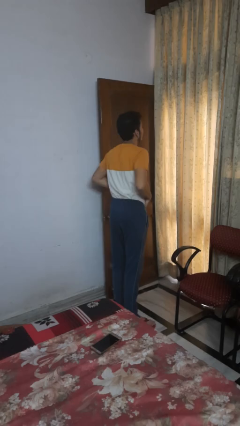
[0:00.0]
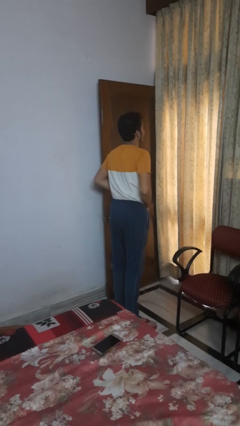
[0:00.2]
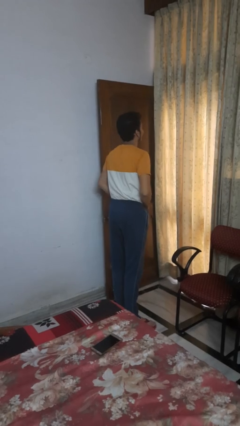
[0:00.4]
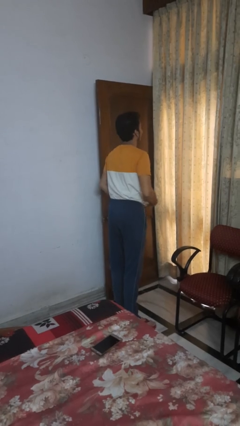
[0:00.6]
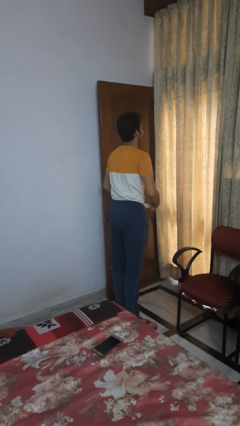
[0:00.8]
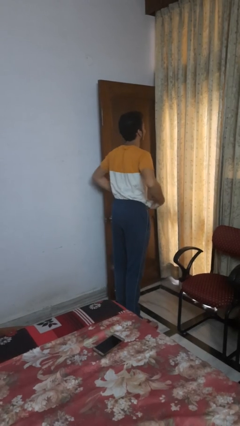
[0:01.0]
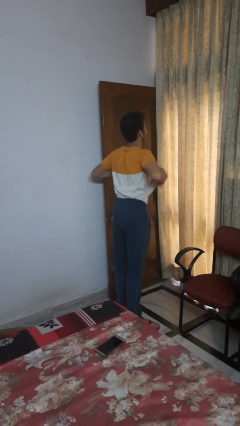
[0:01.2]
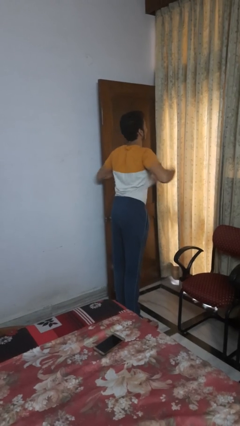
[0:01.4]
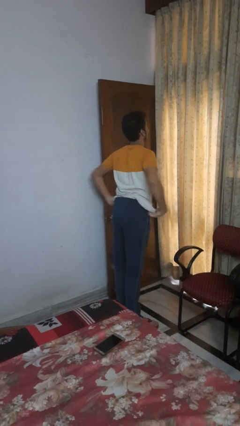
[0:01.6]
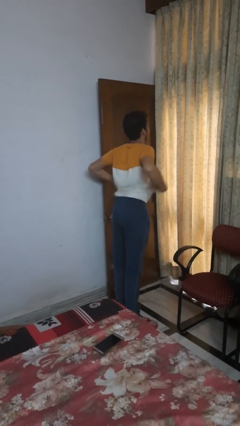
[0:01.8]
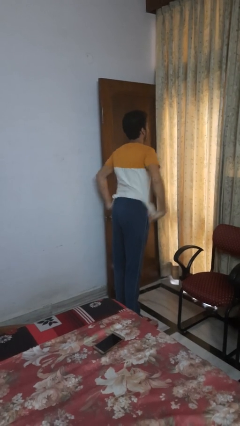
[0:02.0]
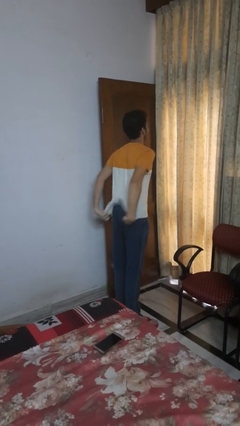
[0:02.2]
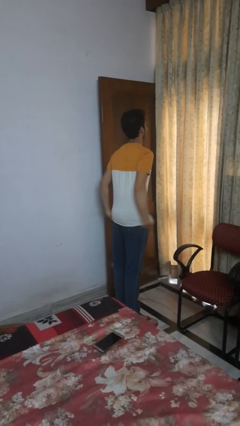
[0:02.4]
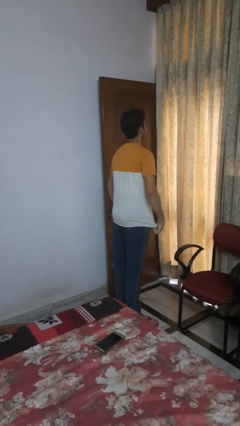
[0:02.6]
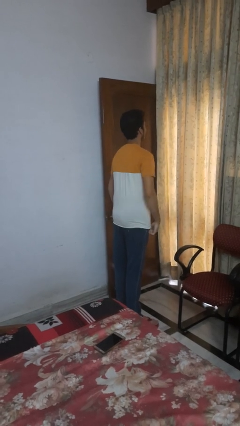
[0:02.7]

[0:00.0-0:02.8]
person untucks shirt

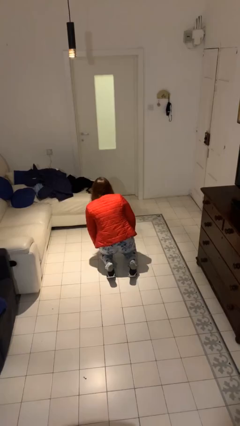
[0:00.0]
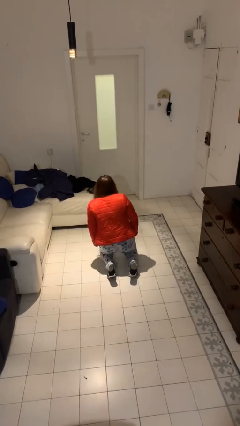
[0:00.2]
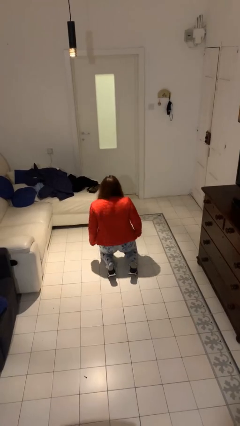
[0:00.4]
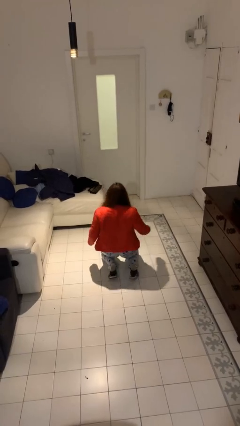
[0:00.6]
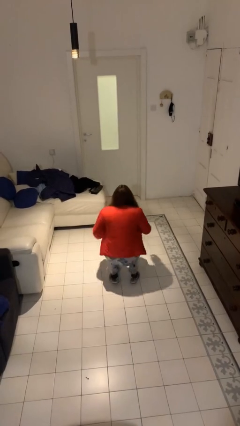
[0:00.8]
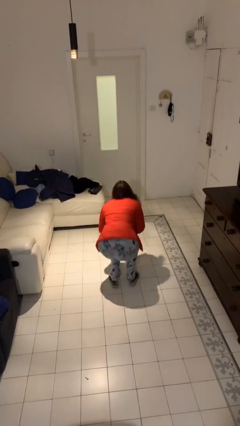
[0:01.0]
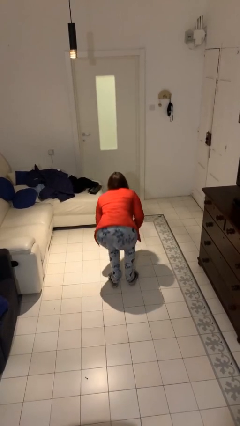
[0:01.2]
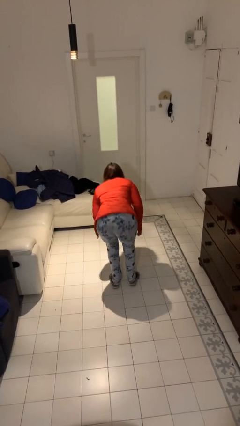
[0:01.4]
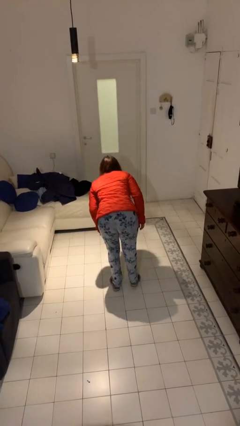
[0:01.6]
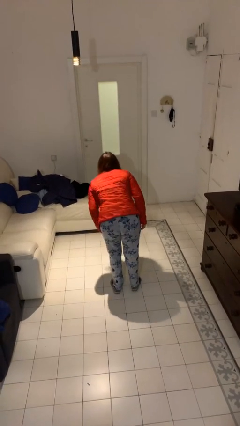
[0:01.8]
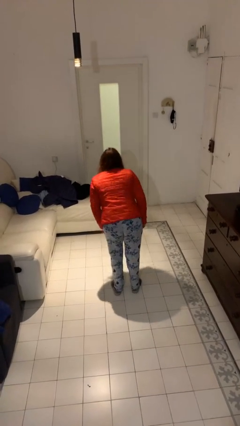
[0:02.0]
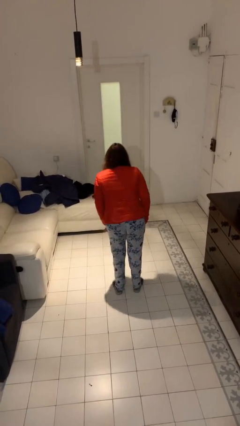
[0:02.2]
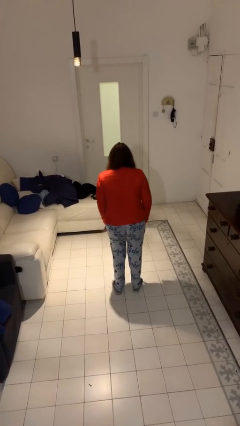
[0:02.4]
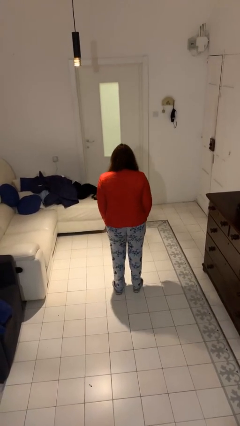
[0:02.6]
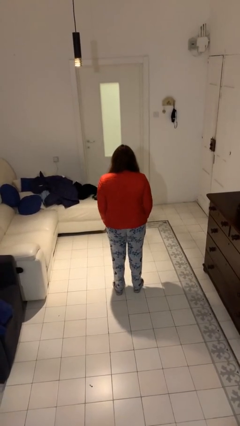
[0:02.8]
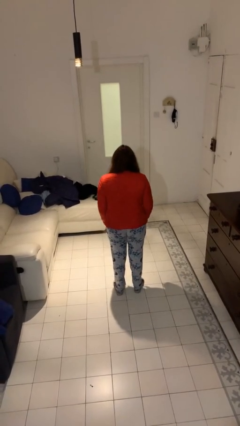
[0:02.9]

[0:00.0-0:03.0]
person stands up from floor

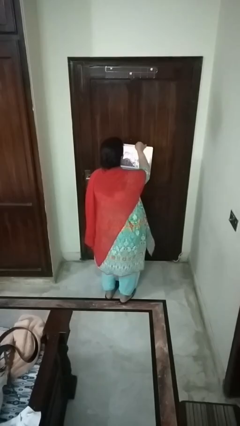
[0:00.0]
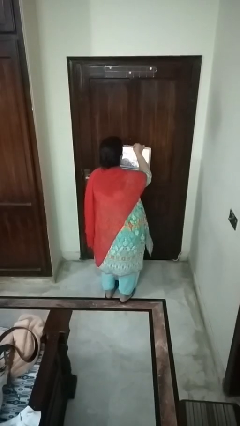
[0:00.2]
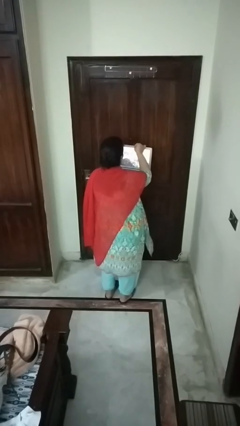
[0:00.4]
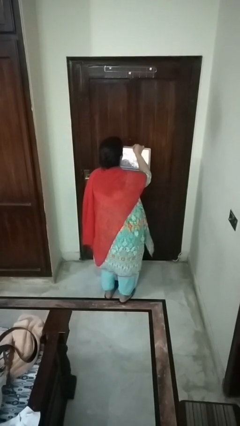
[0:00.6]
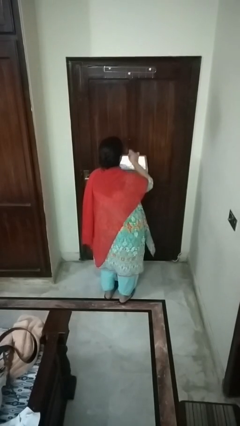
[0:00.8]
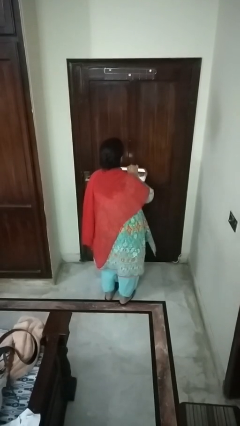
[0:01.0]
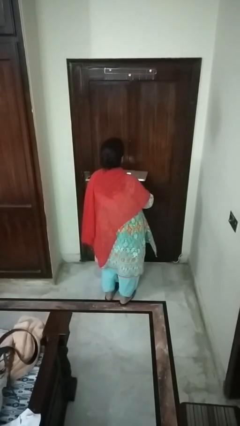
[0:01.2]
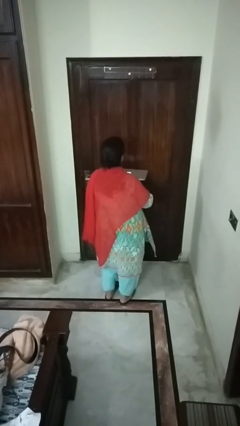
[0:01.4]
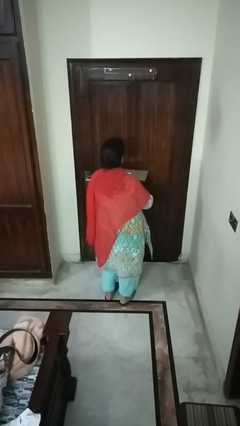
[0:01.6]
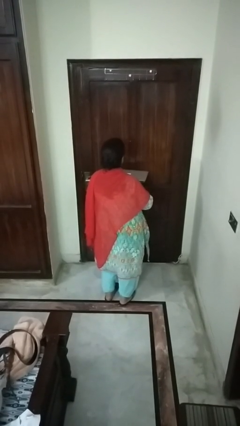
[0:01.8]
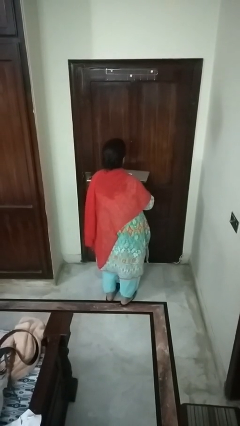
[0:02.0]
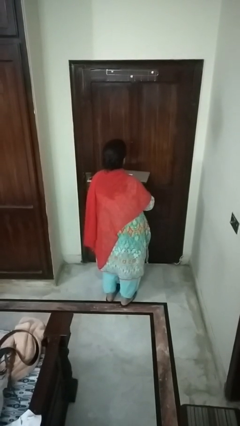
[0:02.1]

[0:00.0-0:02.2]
person closes laptop

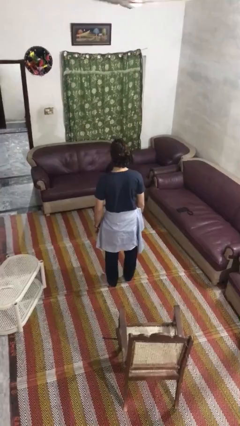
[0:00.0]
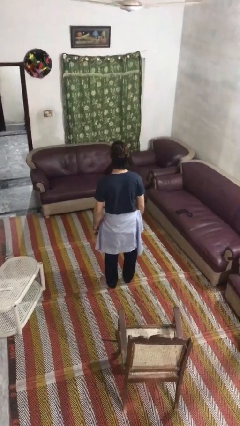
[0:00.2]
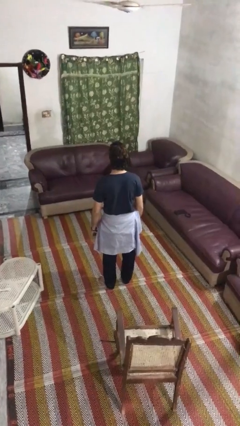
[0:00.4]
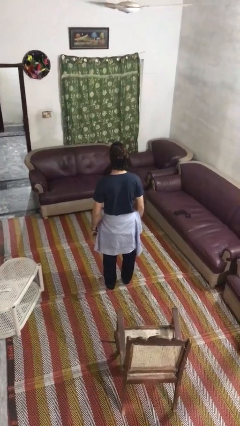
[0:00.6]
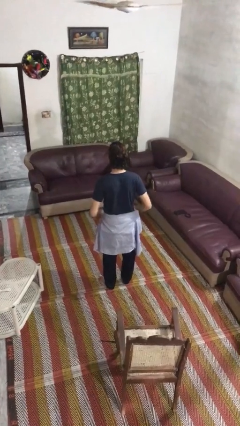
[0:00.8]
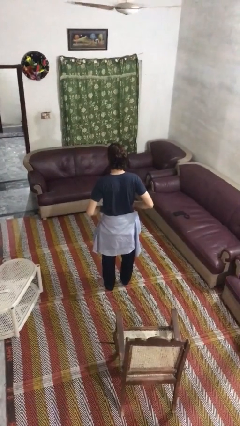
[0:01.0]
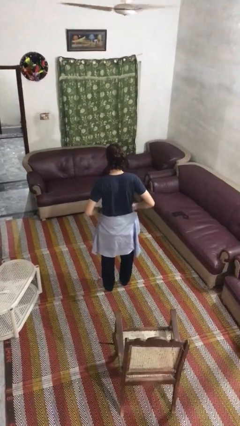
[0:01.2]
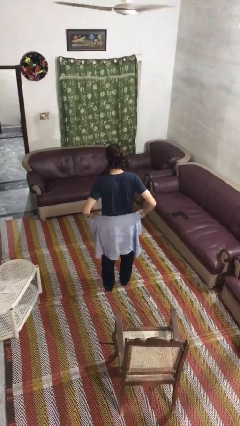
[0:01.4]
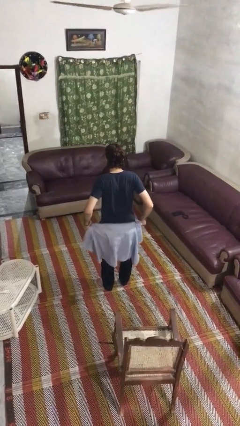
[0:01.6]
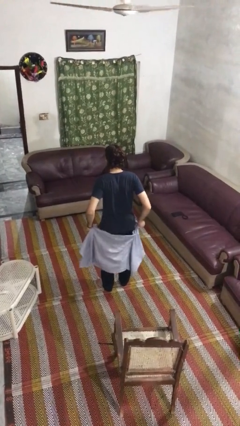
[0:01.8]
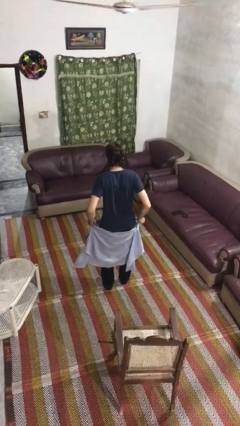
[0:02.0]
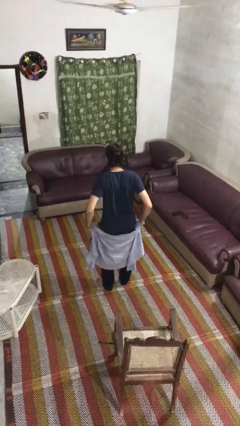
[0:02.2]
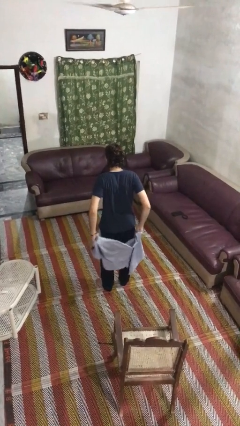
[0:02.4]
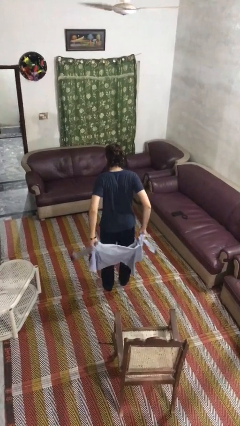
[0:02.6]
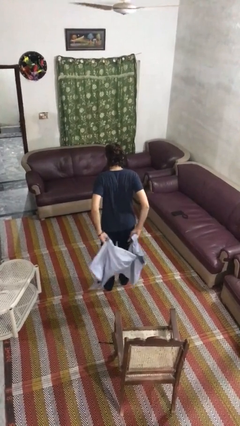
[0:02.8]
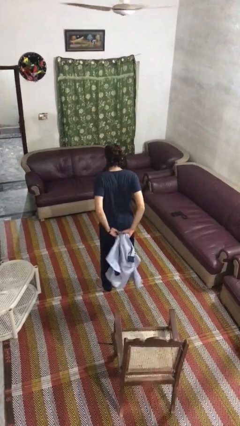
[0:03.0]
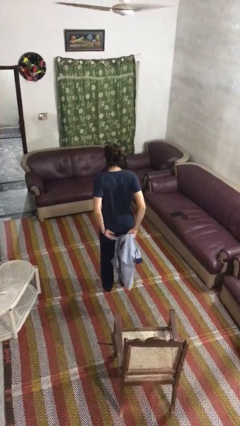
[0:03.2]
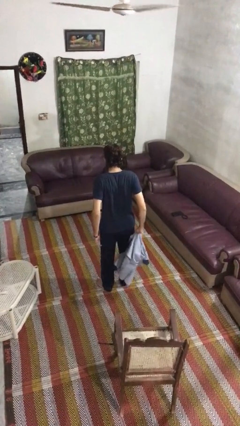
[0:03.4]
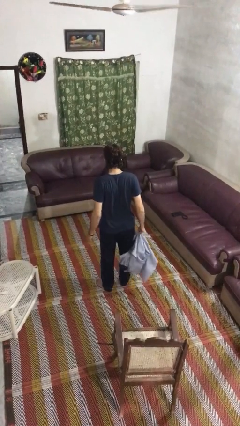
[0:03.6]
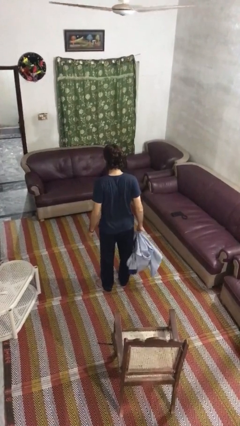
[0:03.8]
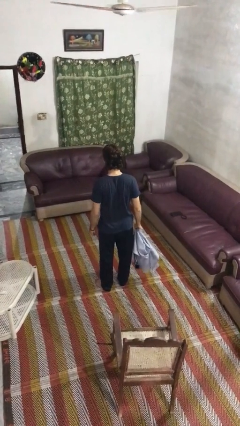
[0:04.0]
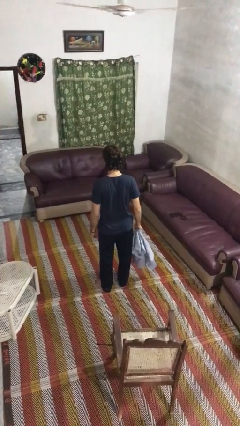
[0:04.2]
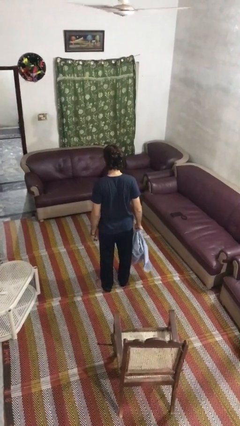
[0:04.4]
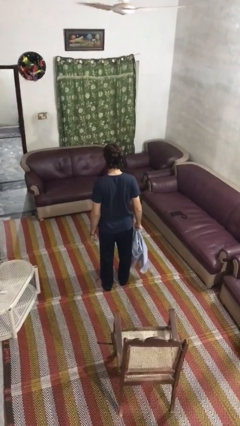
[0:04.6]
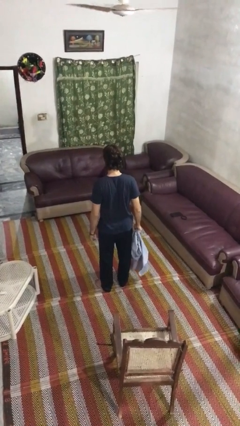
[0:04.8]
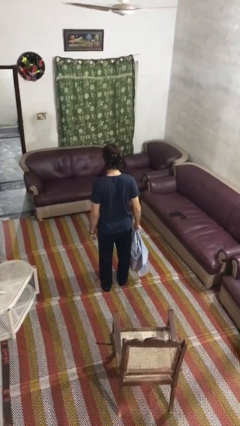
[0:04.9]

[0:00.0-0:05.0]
person unties jacket around waist

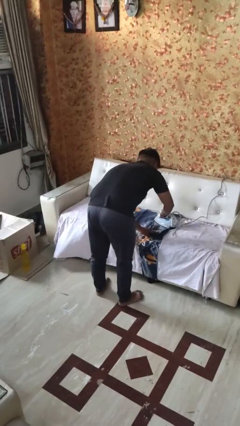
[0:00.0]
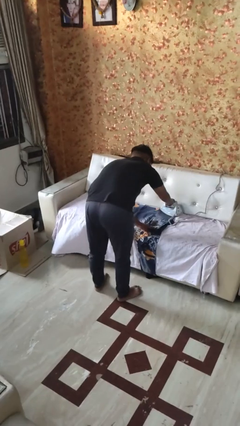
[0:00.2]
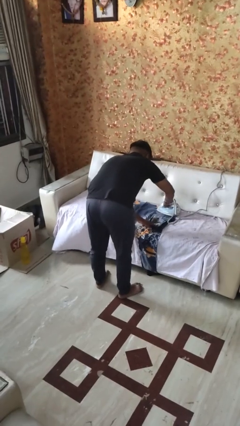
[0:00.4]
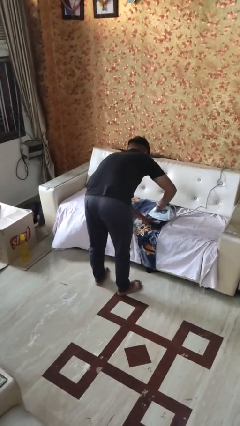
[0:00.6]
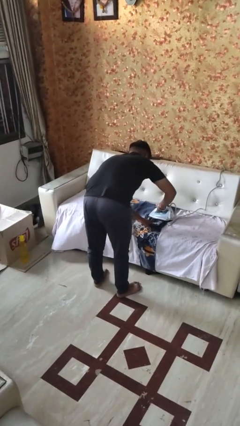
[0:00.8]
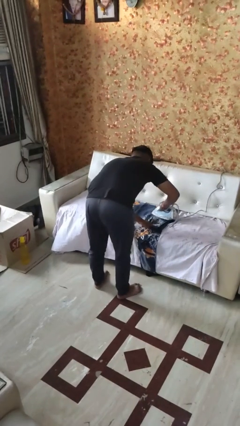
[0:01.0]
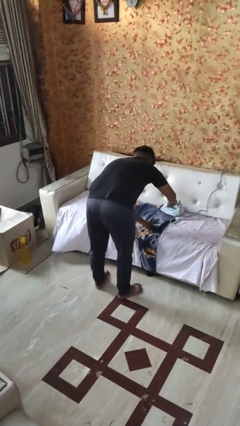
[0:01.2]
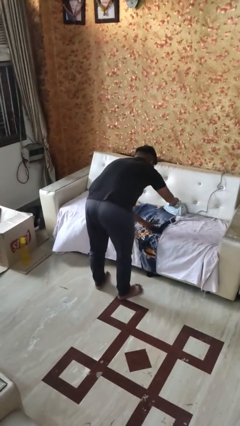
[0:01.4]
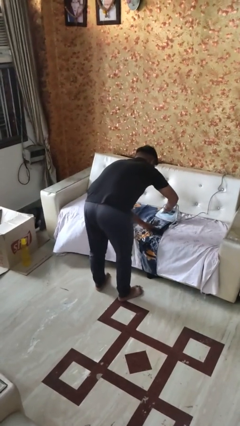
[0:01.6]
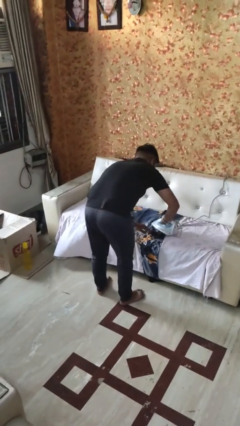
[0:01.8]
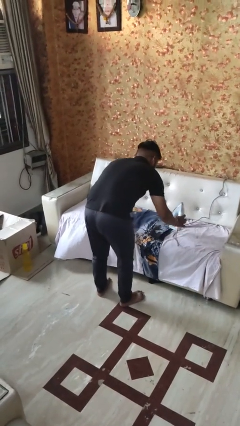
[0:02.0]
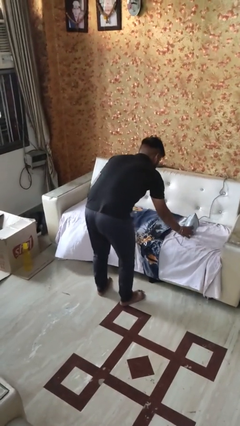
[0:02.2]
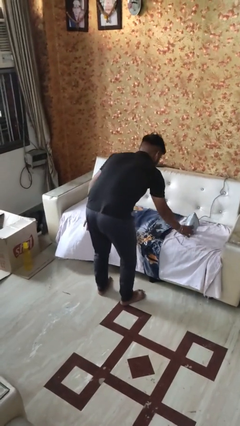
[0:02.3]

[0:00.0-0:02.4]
person irons clothes

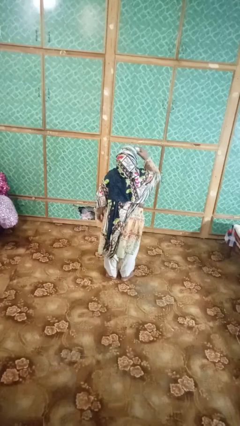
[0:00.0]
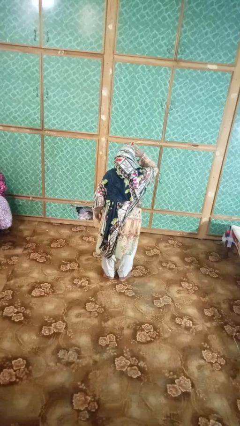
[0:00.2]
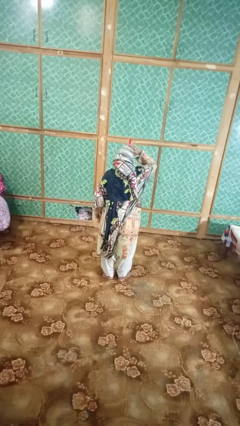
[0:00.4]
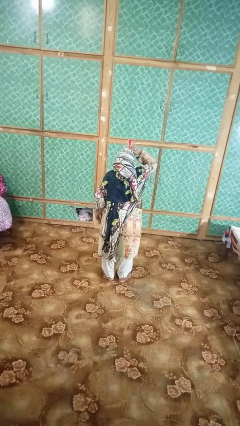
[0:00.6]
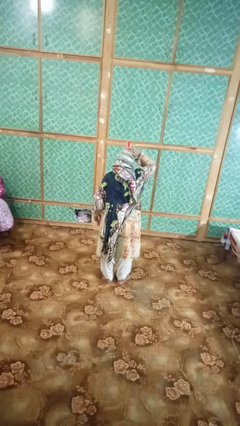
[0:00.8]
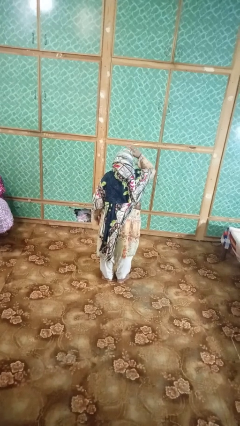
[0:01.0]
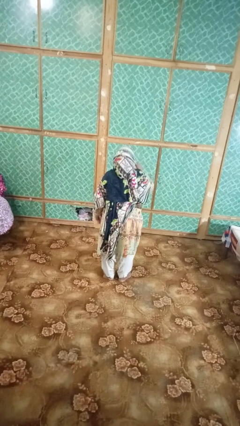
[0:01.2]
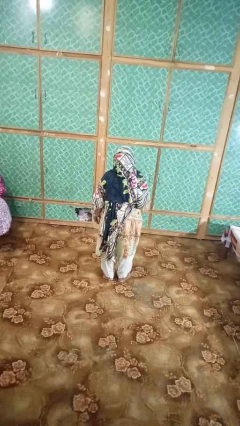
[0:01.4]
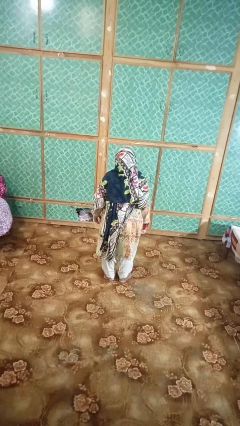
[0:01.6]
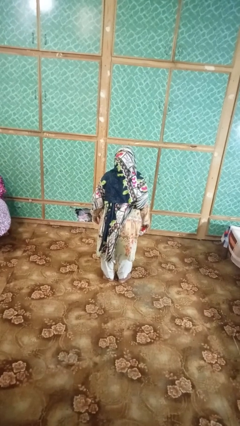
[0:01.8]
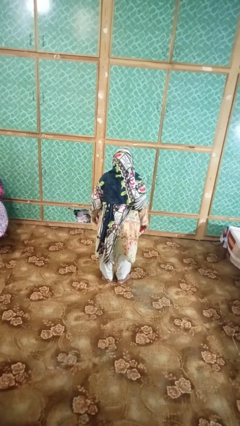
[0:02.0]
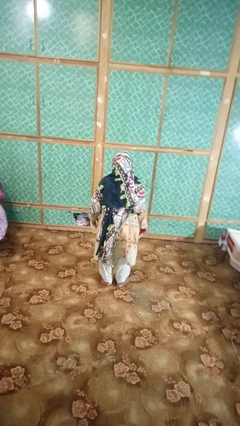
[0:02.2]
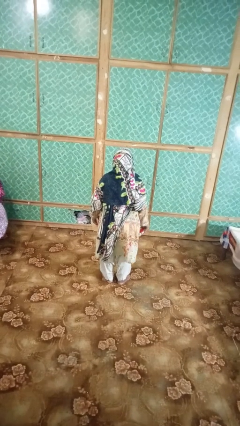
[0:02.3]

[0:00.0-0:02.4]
person drinks from beverage can
